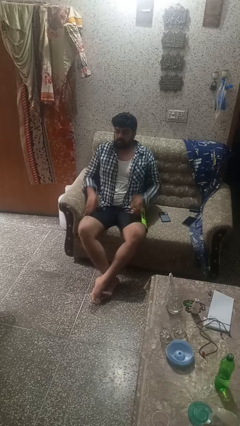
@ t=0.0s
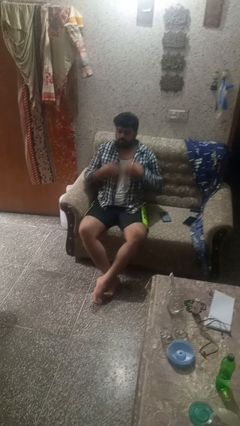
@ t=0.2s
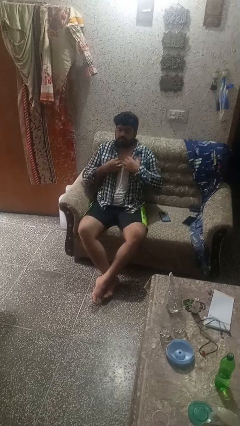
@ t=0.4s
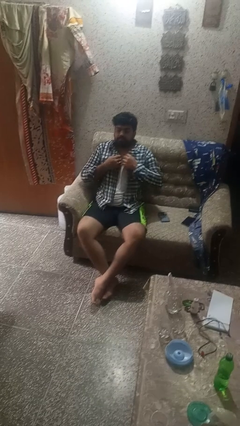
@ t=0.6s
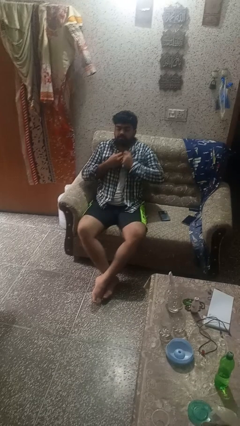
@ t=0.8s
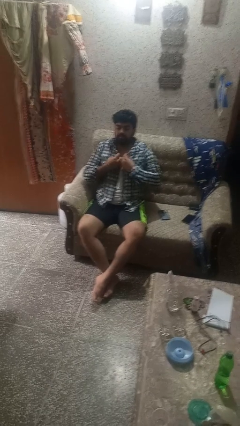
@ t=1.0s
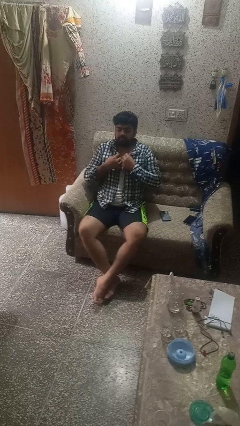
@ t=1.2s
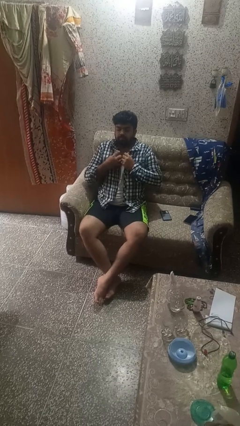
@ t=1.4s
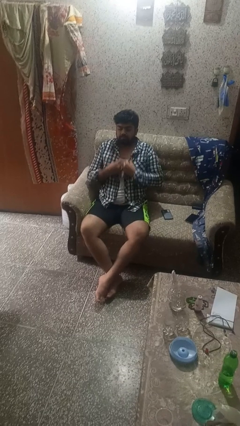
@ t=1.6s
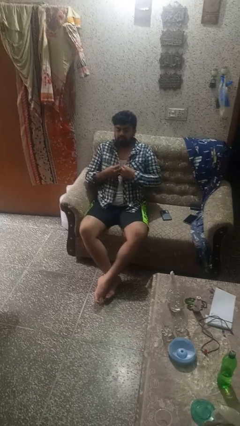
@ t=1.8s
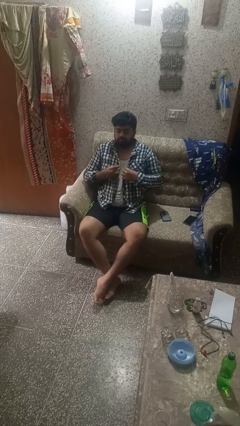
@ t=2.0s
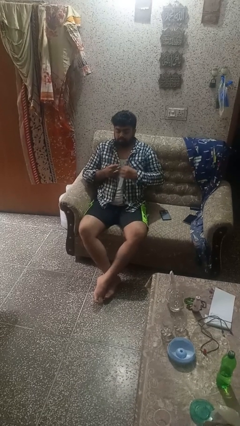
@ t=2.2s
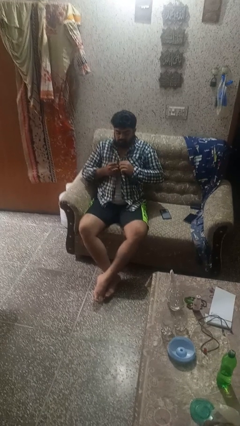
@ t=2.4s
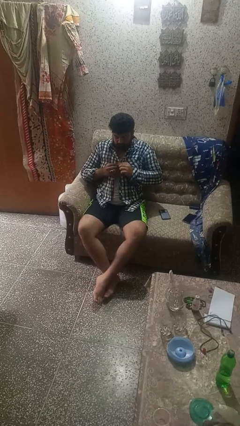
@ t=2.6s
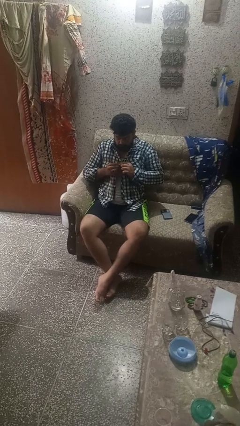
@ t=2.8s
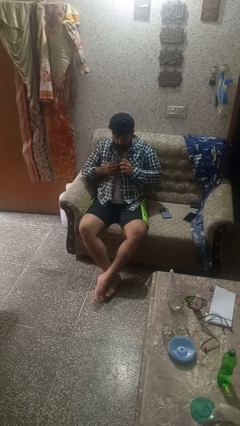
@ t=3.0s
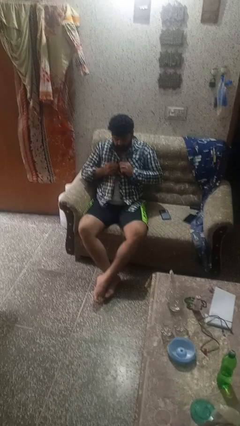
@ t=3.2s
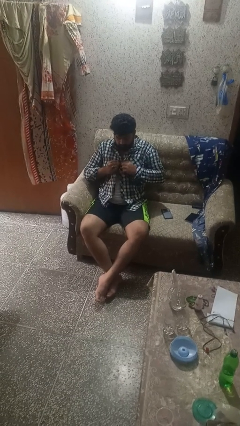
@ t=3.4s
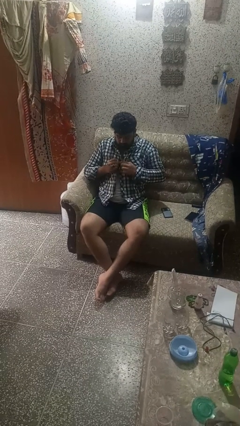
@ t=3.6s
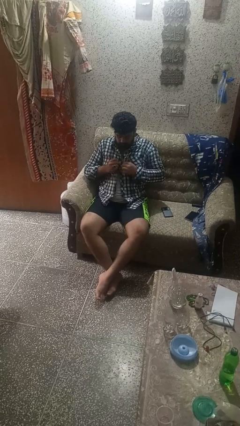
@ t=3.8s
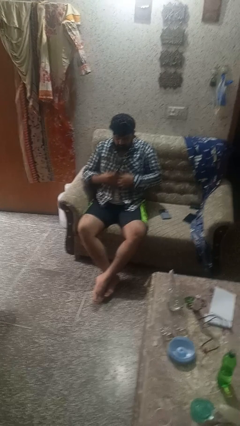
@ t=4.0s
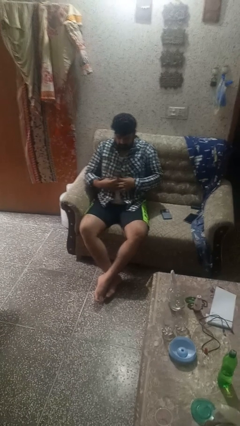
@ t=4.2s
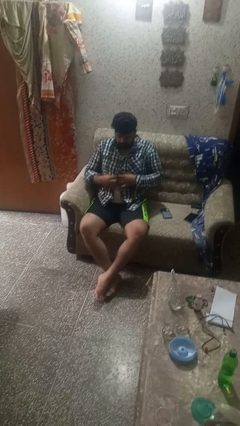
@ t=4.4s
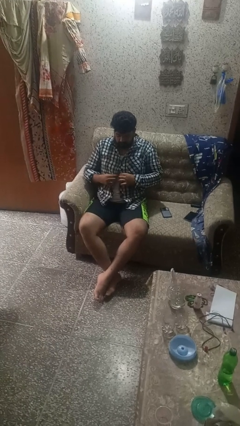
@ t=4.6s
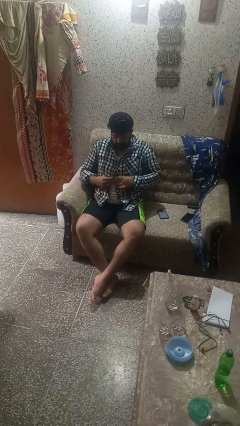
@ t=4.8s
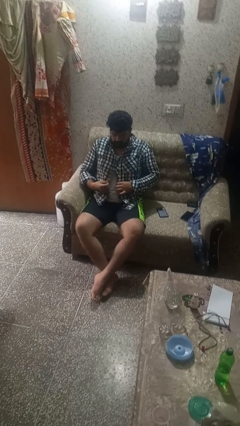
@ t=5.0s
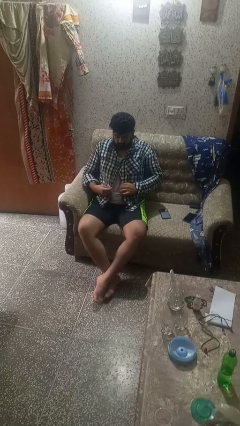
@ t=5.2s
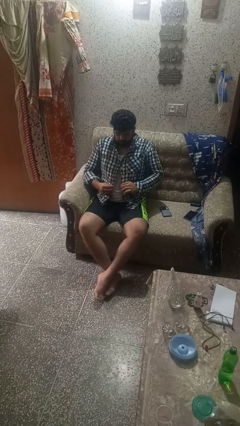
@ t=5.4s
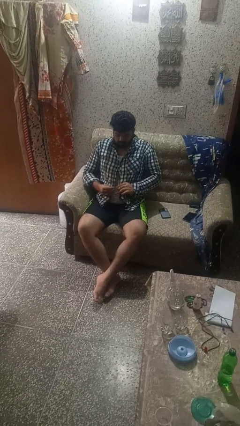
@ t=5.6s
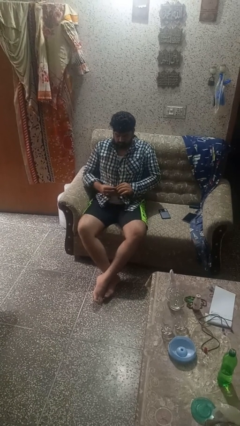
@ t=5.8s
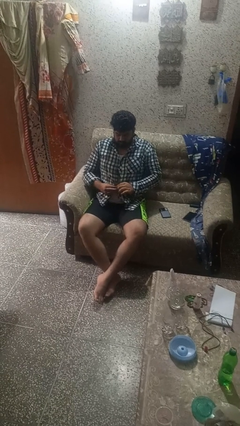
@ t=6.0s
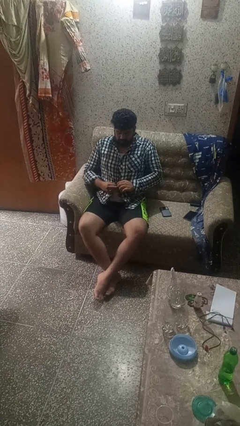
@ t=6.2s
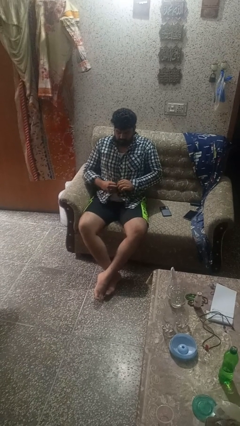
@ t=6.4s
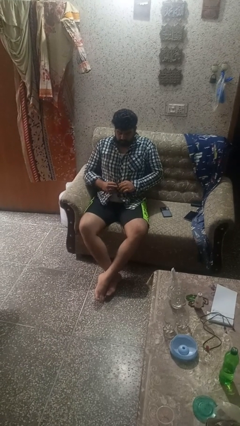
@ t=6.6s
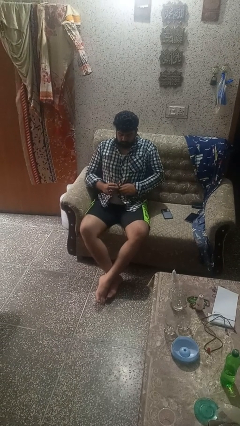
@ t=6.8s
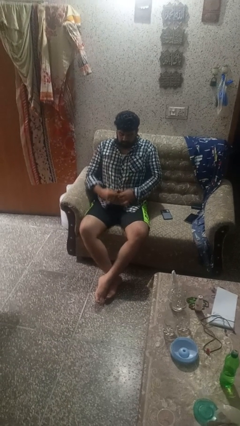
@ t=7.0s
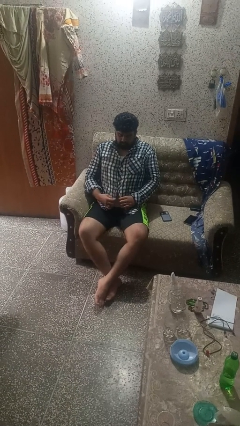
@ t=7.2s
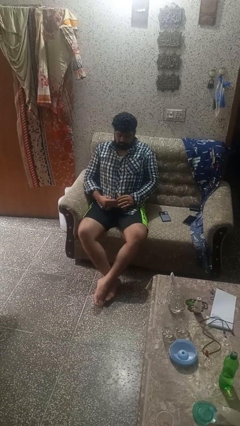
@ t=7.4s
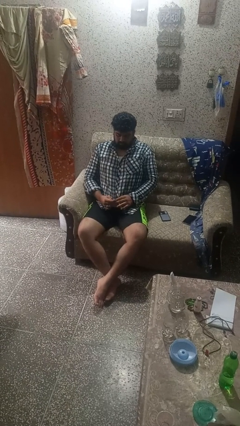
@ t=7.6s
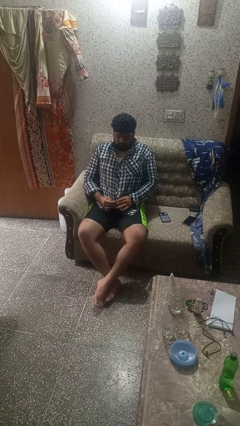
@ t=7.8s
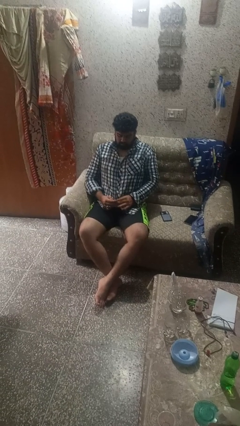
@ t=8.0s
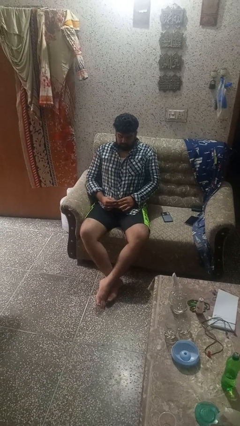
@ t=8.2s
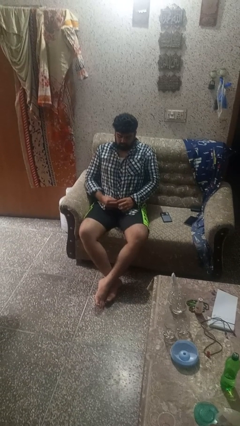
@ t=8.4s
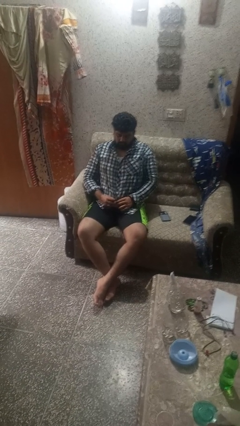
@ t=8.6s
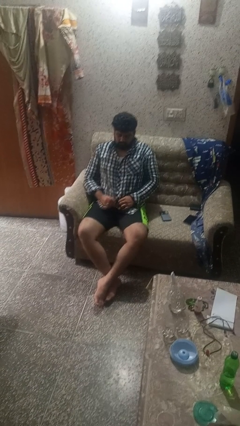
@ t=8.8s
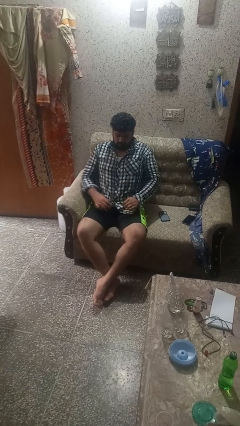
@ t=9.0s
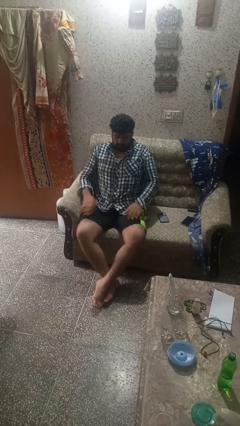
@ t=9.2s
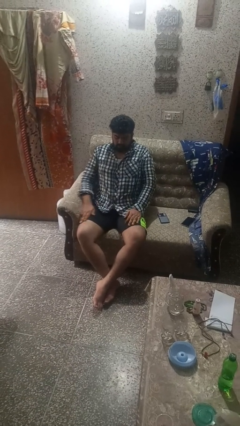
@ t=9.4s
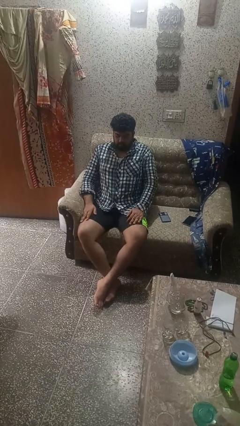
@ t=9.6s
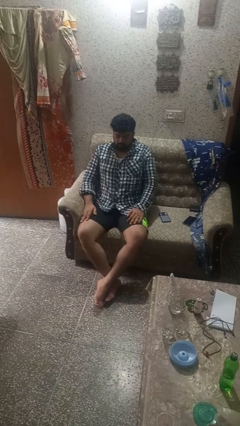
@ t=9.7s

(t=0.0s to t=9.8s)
person buttons shirt

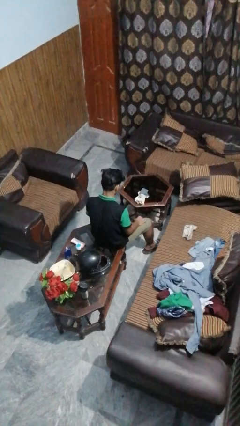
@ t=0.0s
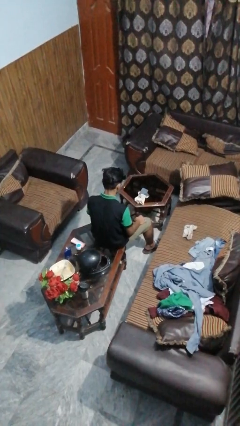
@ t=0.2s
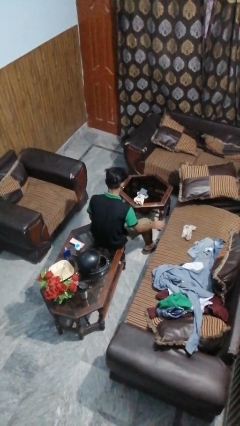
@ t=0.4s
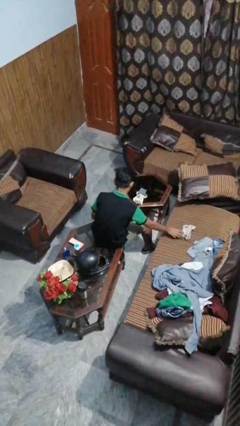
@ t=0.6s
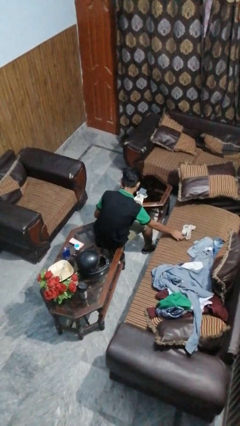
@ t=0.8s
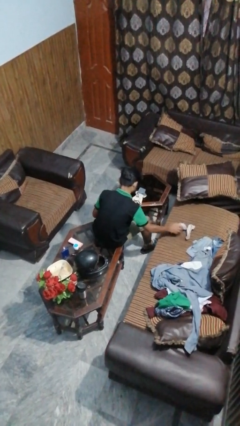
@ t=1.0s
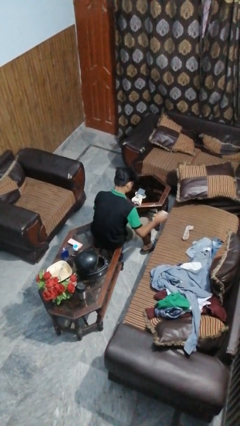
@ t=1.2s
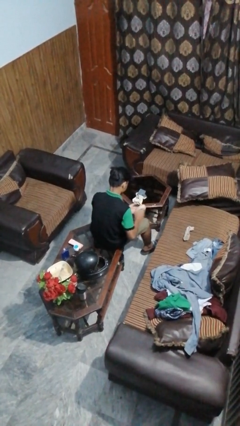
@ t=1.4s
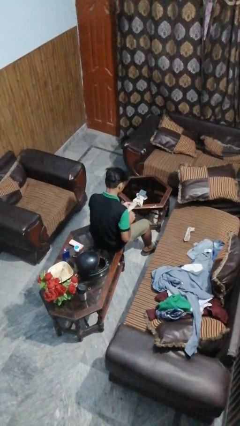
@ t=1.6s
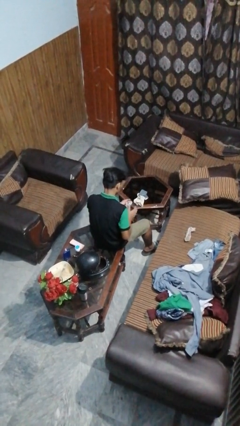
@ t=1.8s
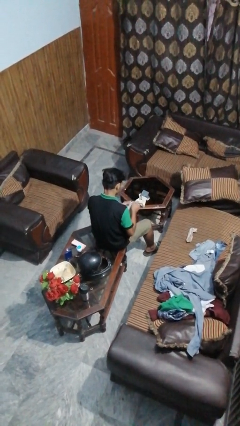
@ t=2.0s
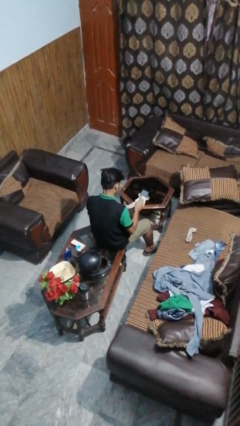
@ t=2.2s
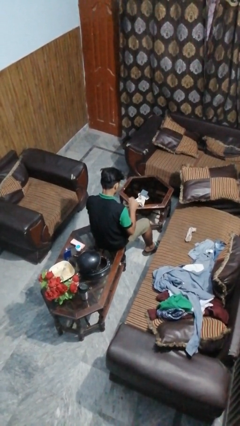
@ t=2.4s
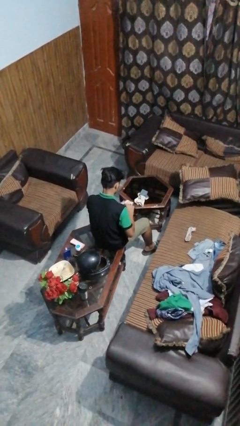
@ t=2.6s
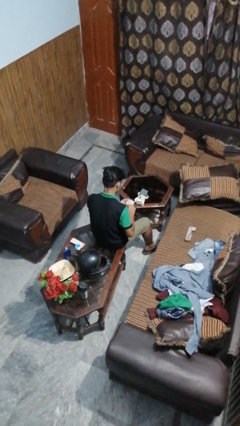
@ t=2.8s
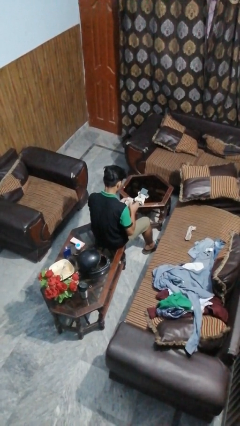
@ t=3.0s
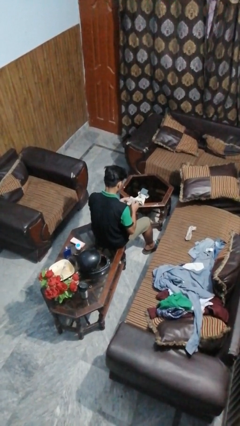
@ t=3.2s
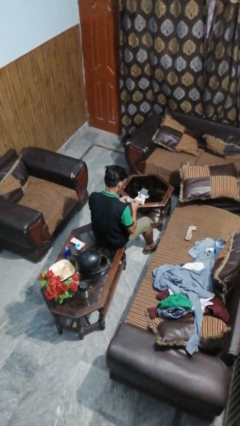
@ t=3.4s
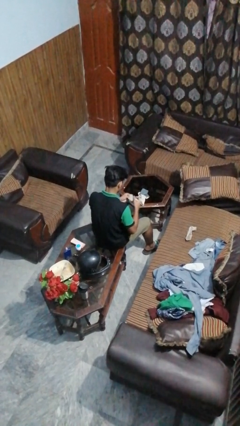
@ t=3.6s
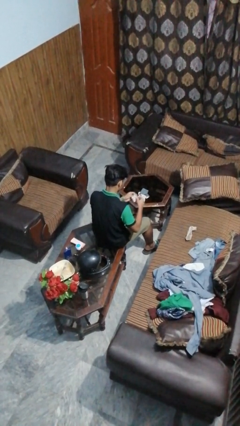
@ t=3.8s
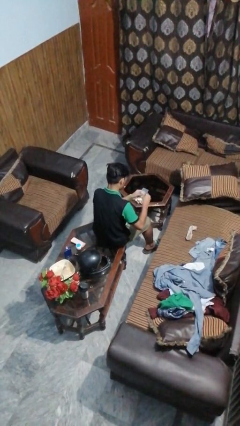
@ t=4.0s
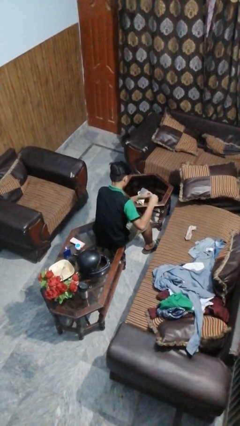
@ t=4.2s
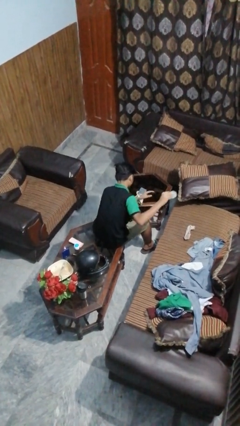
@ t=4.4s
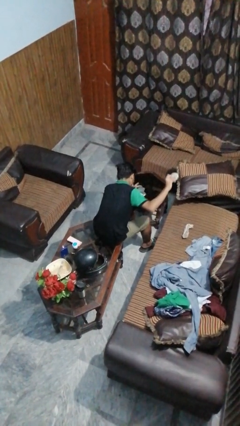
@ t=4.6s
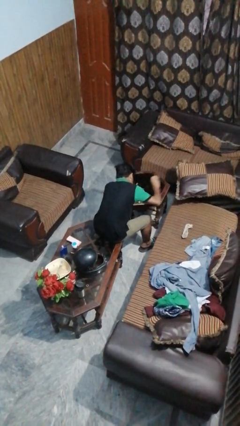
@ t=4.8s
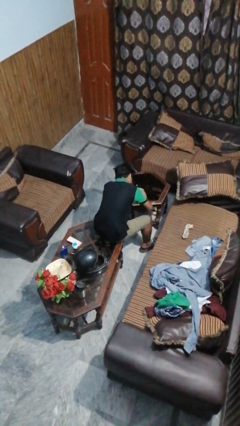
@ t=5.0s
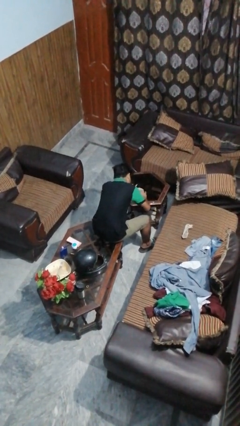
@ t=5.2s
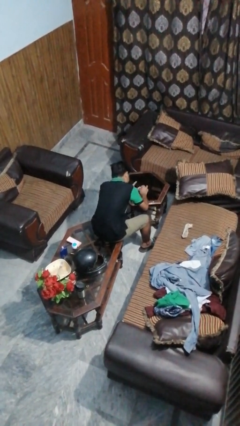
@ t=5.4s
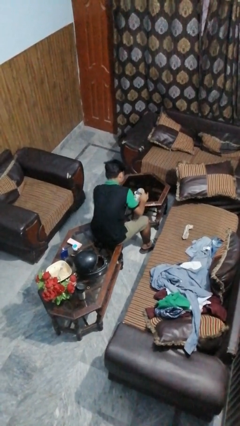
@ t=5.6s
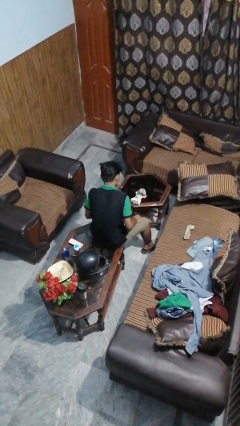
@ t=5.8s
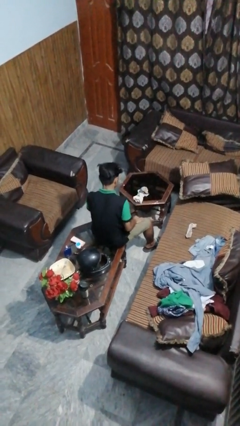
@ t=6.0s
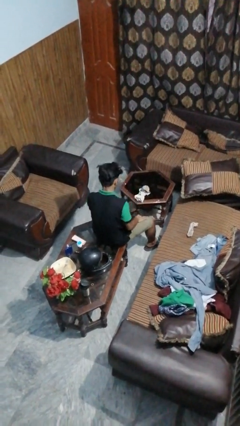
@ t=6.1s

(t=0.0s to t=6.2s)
person folds socks

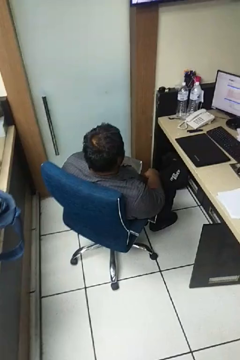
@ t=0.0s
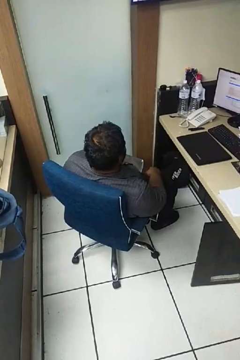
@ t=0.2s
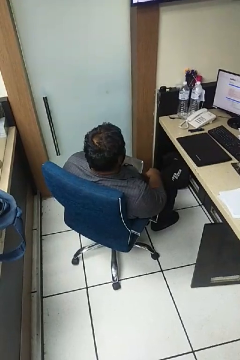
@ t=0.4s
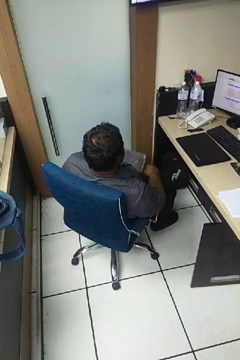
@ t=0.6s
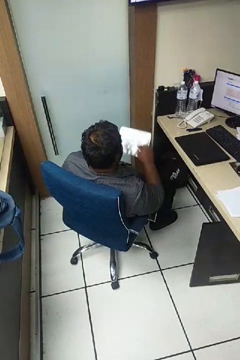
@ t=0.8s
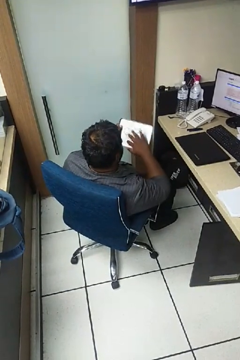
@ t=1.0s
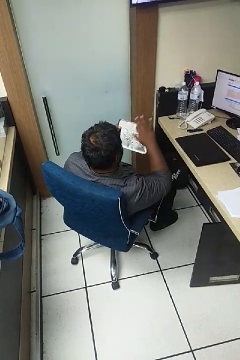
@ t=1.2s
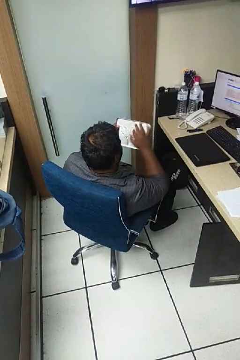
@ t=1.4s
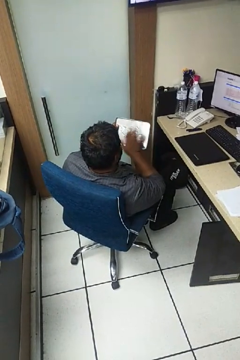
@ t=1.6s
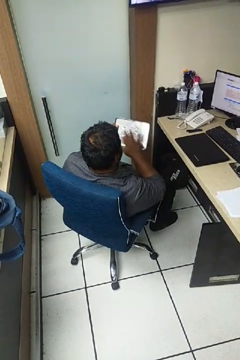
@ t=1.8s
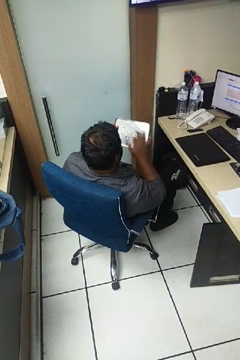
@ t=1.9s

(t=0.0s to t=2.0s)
person interacts with tablet
